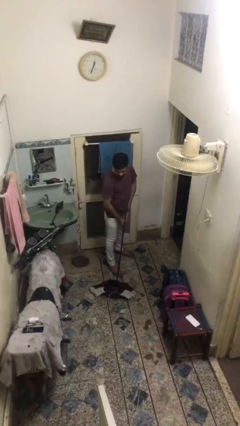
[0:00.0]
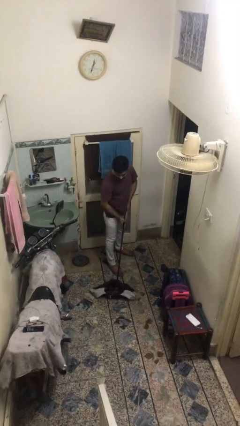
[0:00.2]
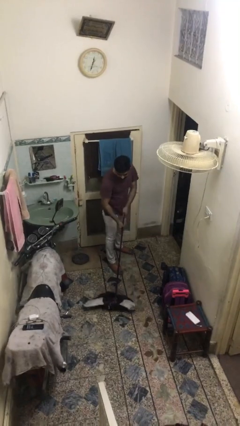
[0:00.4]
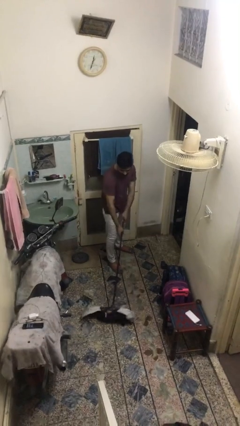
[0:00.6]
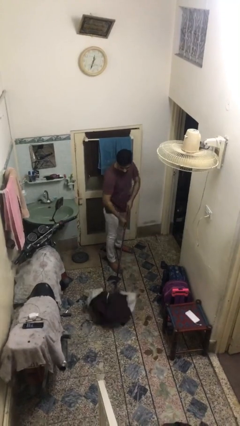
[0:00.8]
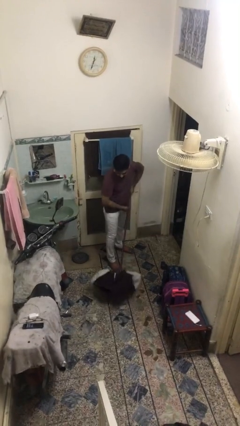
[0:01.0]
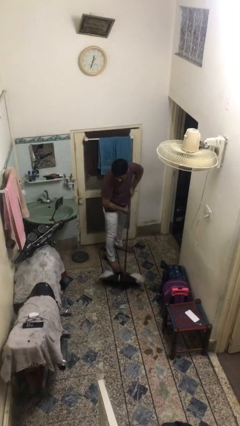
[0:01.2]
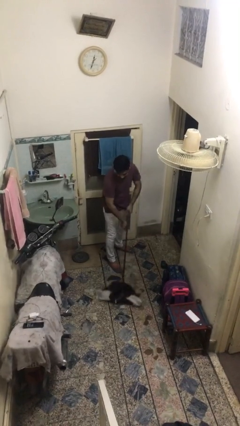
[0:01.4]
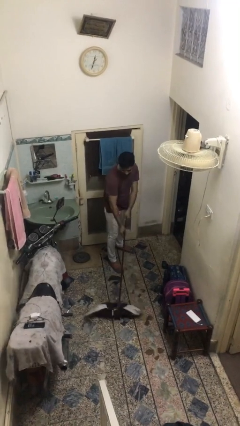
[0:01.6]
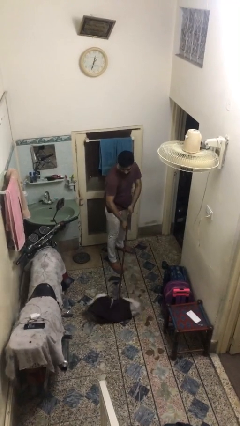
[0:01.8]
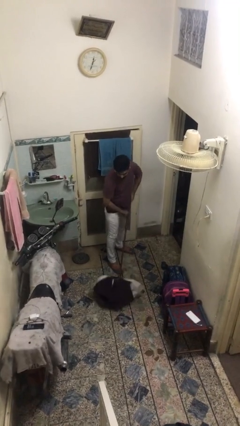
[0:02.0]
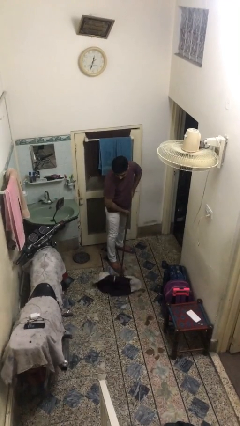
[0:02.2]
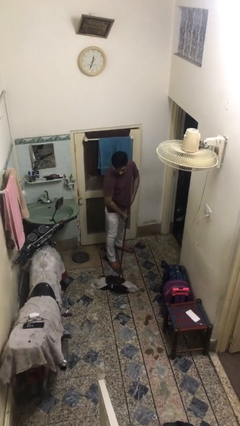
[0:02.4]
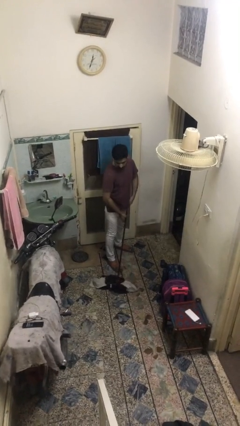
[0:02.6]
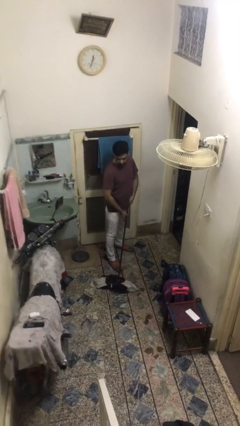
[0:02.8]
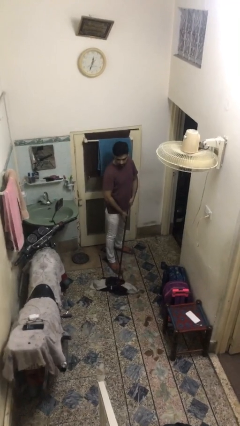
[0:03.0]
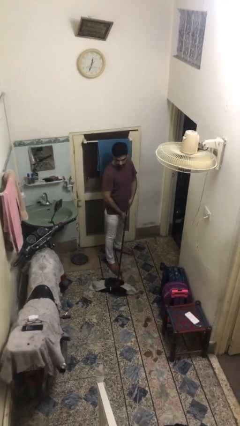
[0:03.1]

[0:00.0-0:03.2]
person sweeps floor

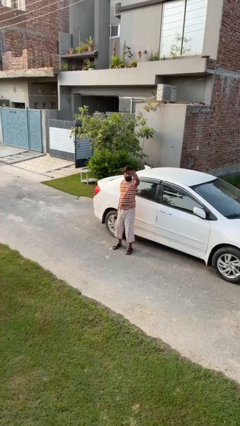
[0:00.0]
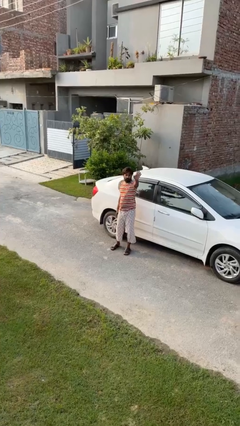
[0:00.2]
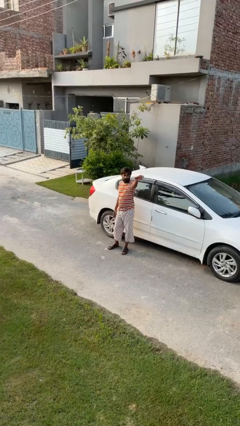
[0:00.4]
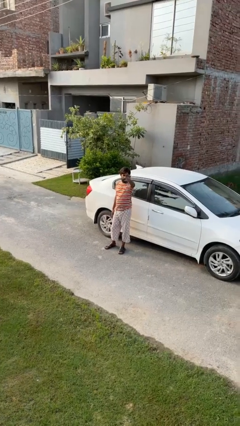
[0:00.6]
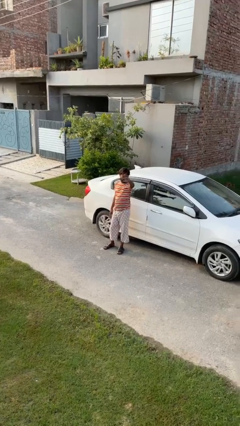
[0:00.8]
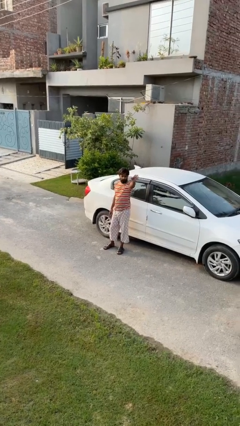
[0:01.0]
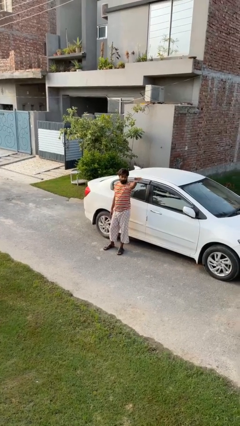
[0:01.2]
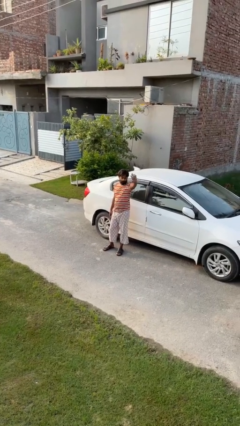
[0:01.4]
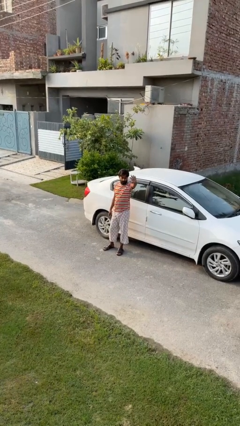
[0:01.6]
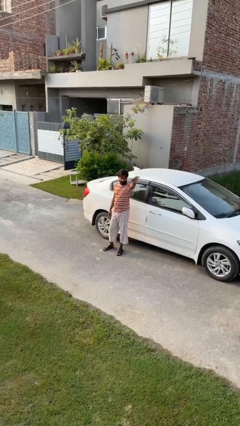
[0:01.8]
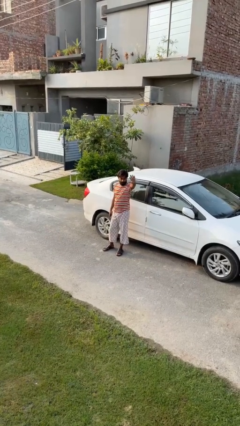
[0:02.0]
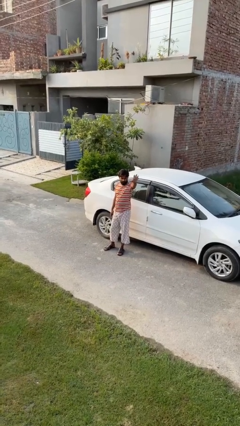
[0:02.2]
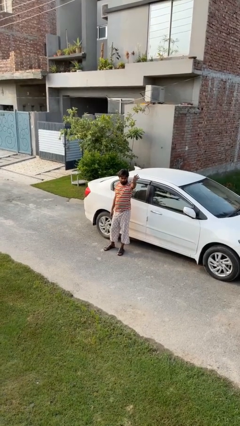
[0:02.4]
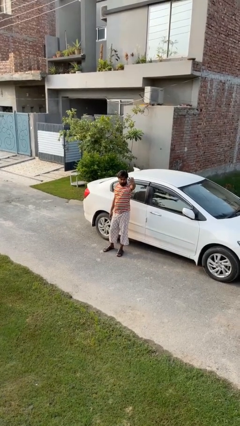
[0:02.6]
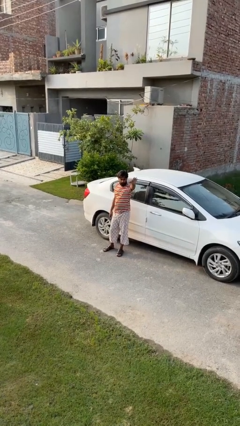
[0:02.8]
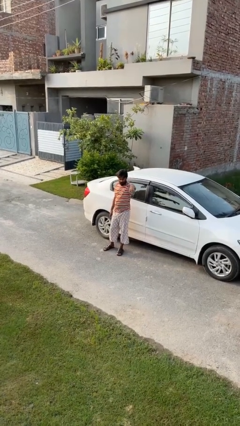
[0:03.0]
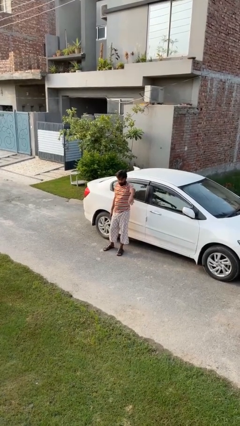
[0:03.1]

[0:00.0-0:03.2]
person waves at person

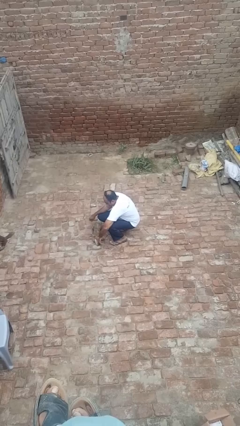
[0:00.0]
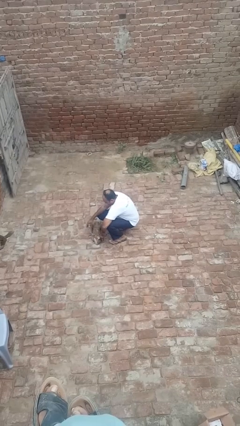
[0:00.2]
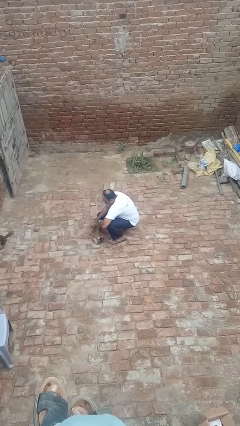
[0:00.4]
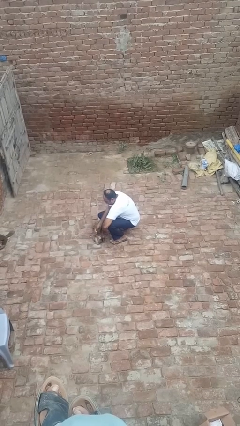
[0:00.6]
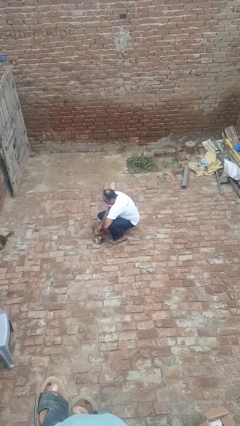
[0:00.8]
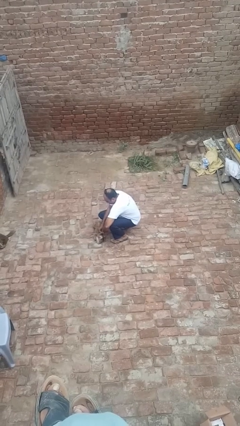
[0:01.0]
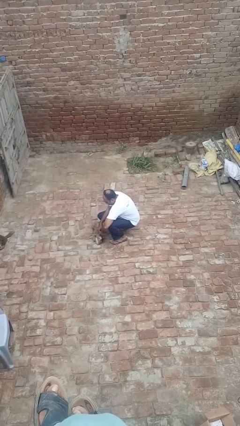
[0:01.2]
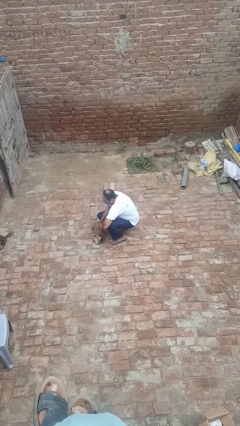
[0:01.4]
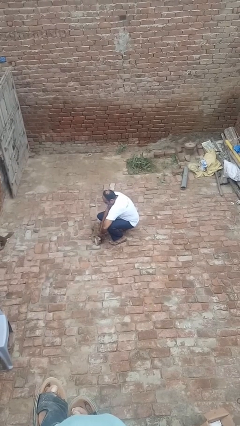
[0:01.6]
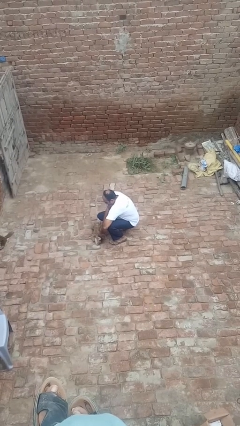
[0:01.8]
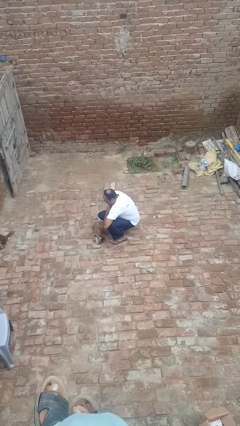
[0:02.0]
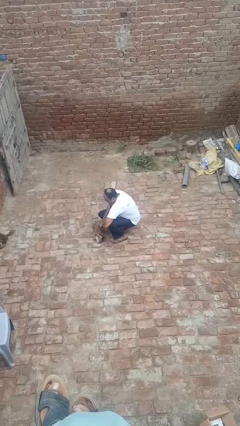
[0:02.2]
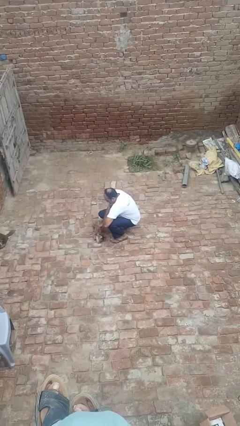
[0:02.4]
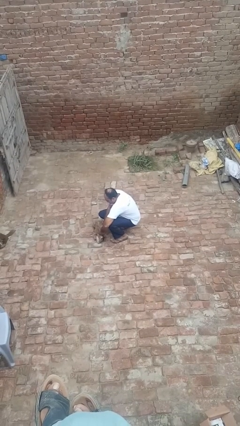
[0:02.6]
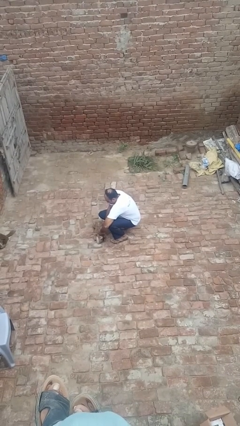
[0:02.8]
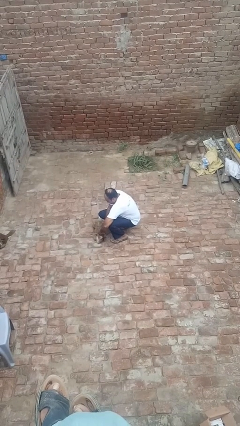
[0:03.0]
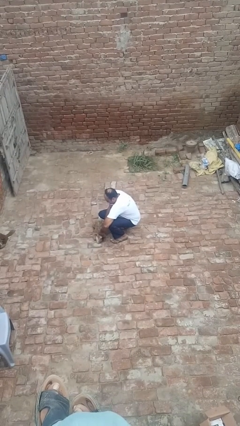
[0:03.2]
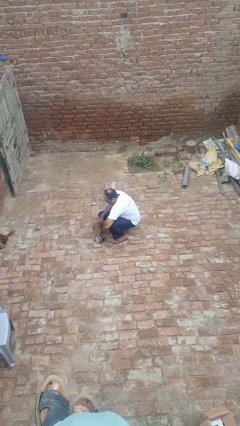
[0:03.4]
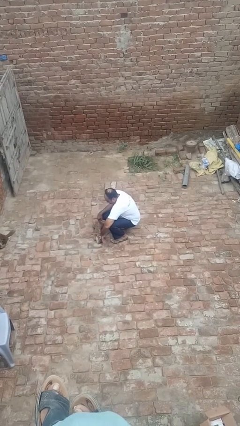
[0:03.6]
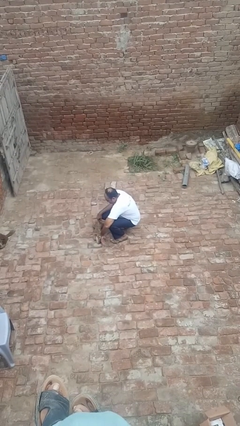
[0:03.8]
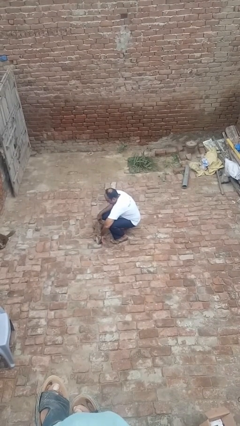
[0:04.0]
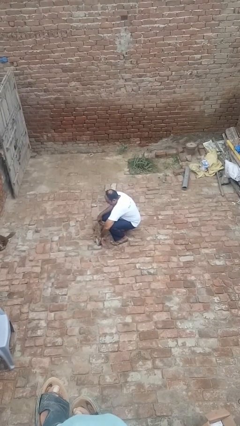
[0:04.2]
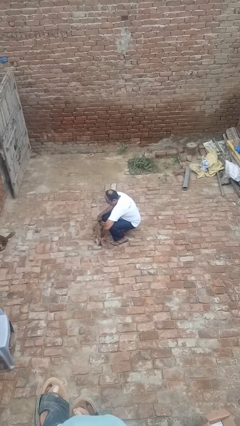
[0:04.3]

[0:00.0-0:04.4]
person attaches leash to dog

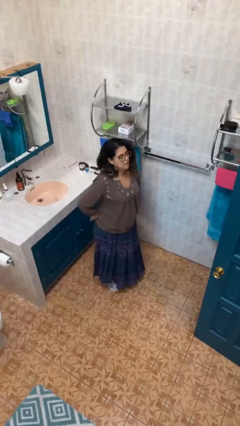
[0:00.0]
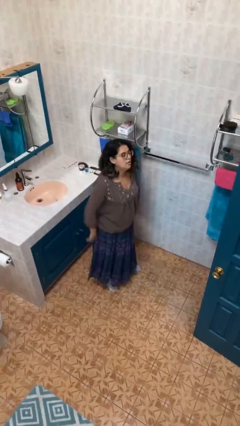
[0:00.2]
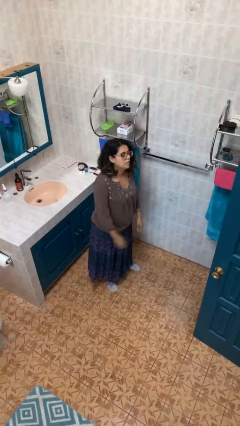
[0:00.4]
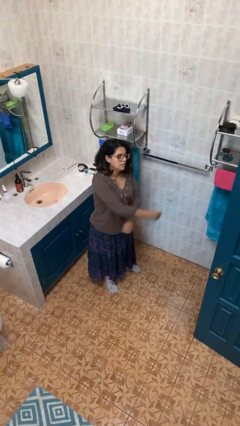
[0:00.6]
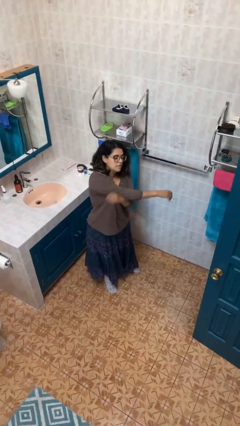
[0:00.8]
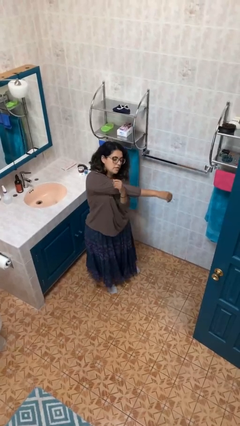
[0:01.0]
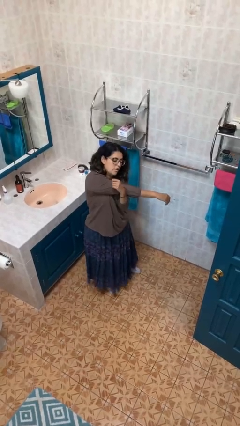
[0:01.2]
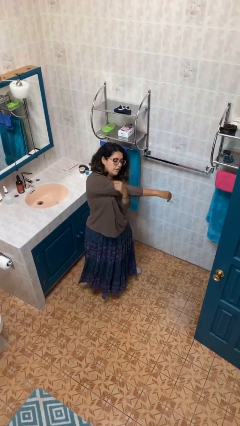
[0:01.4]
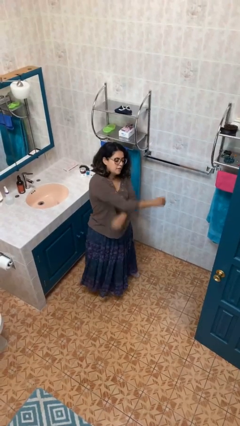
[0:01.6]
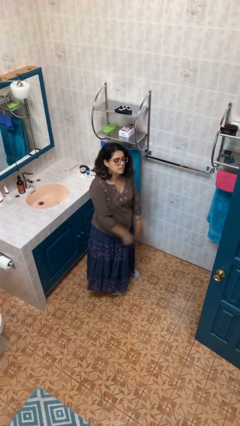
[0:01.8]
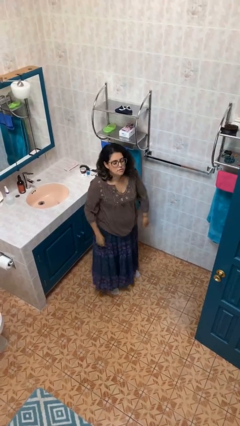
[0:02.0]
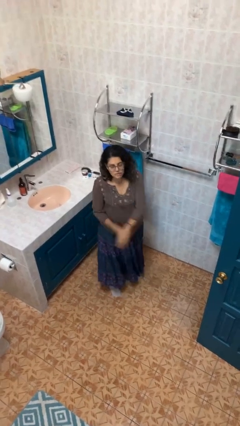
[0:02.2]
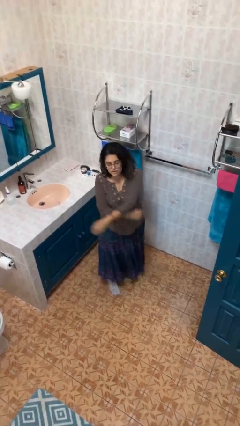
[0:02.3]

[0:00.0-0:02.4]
person stretches arms to side

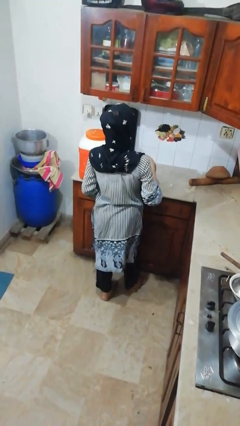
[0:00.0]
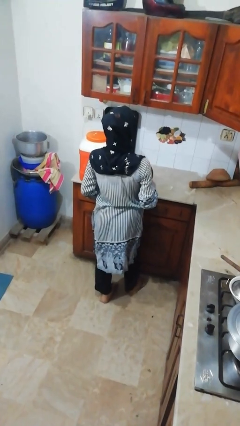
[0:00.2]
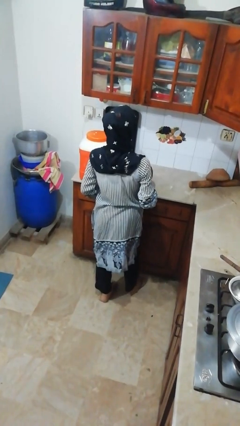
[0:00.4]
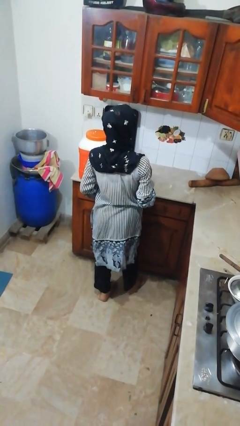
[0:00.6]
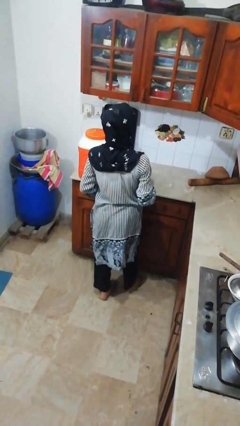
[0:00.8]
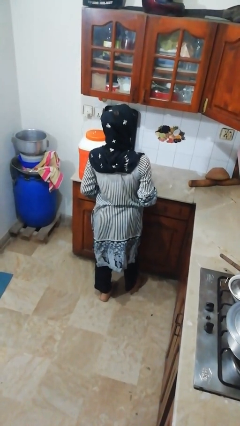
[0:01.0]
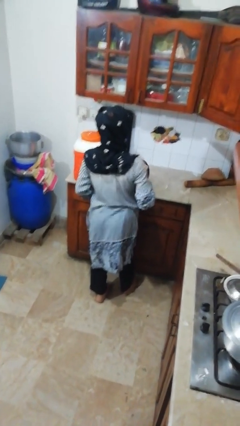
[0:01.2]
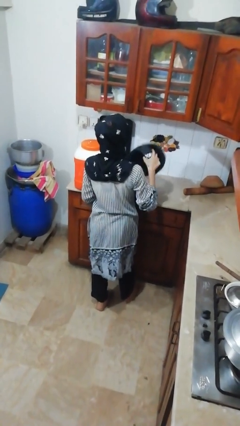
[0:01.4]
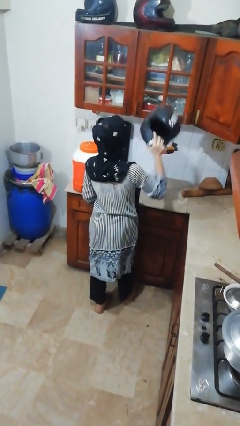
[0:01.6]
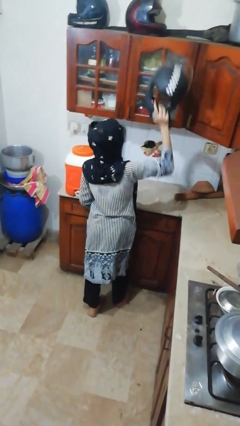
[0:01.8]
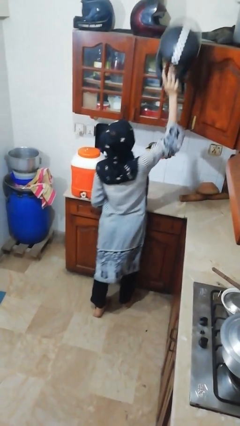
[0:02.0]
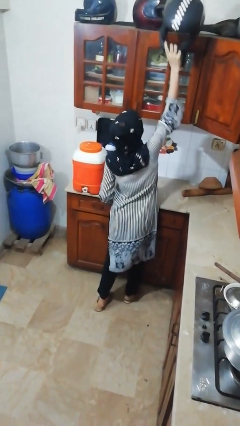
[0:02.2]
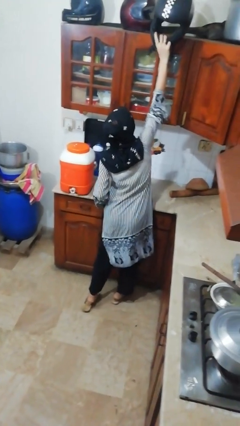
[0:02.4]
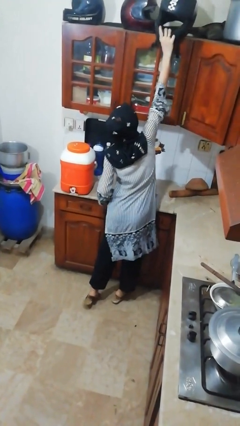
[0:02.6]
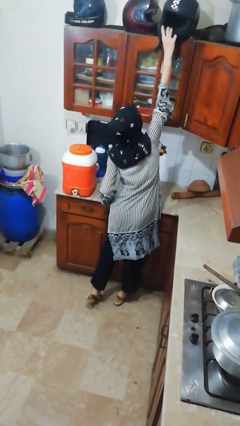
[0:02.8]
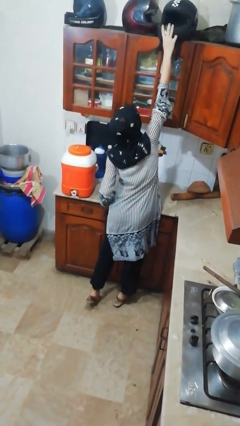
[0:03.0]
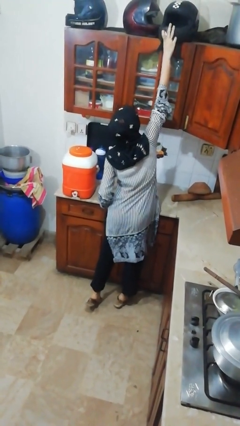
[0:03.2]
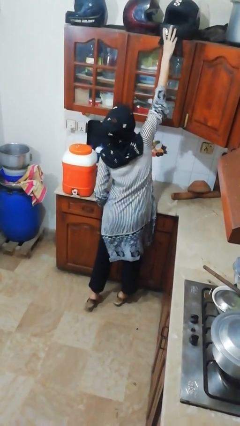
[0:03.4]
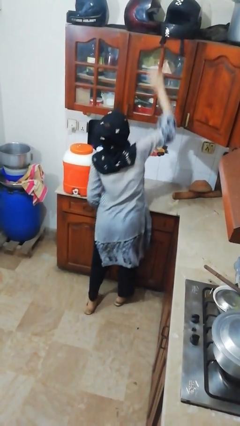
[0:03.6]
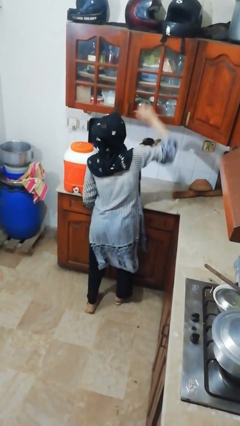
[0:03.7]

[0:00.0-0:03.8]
person puts down object on shelf

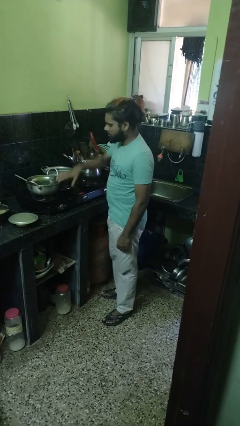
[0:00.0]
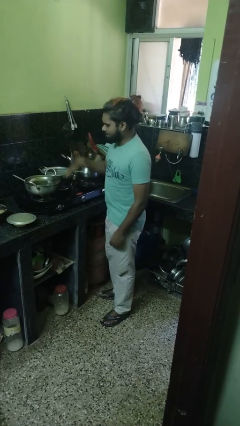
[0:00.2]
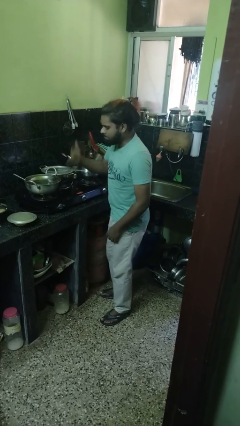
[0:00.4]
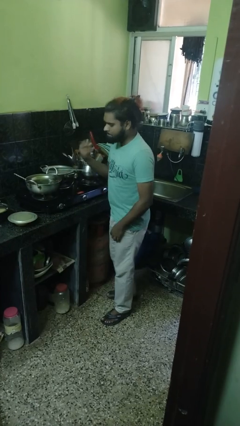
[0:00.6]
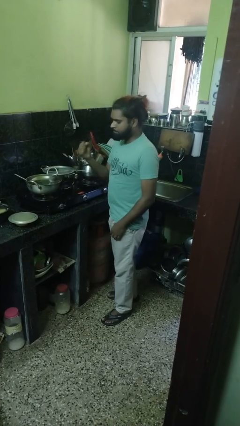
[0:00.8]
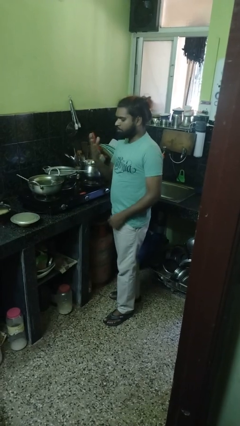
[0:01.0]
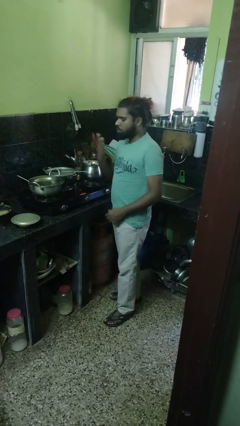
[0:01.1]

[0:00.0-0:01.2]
person burns hand
